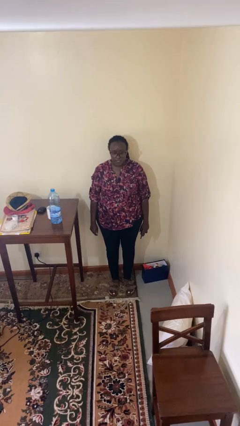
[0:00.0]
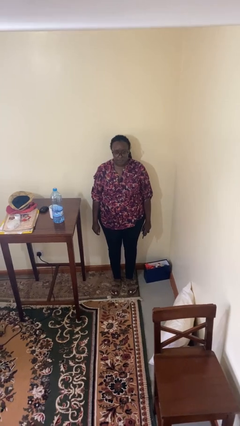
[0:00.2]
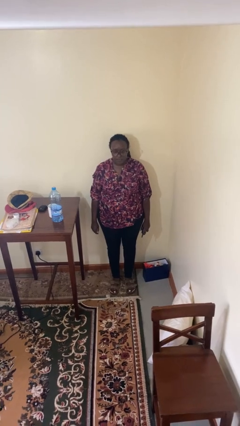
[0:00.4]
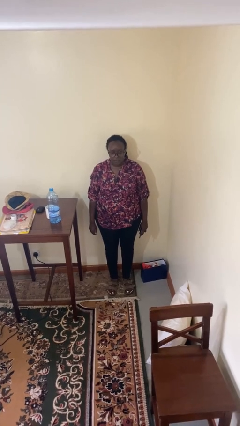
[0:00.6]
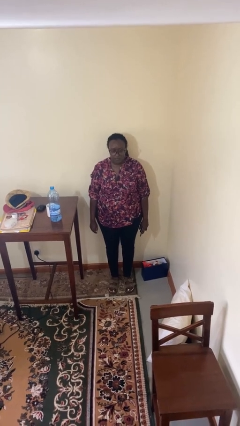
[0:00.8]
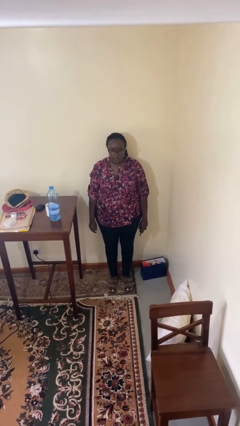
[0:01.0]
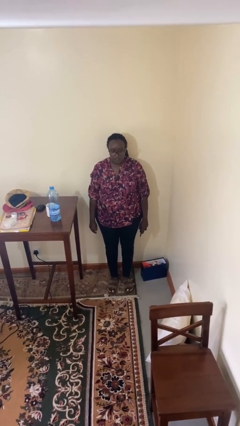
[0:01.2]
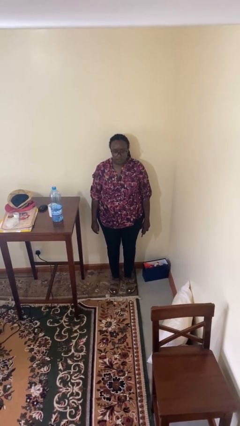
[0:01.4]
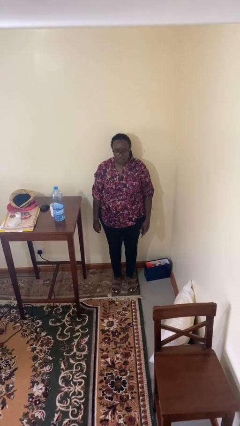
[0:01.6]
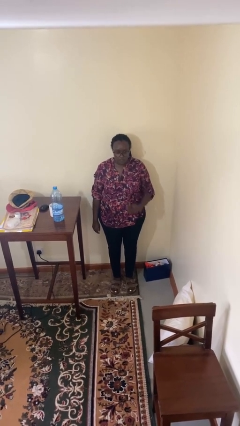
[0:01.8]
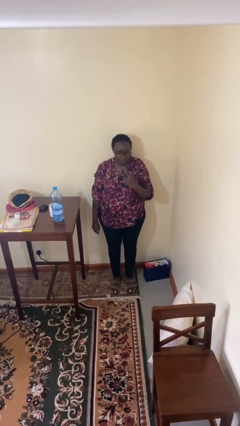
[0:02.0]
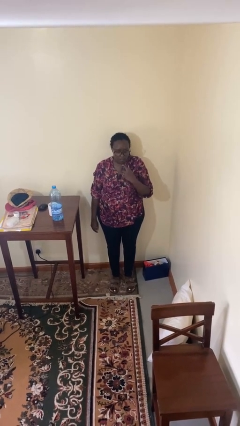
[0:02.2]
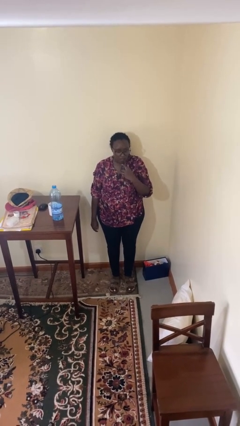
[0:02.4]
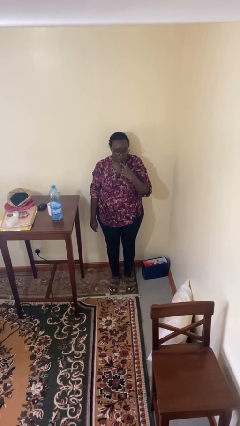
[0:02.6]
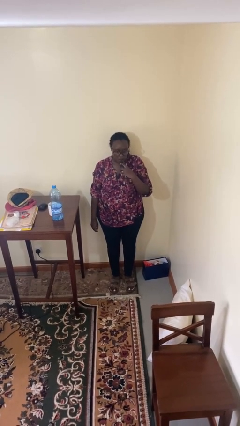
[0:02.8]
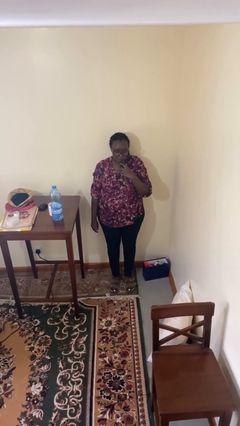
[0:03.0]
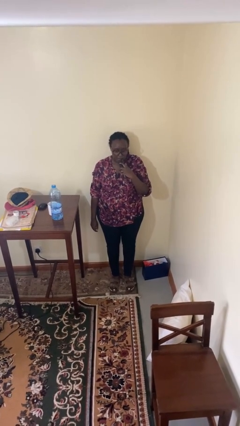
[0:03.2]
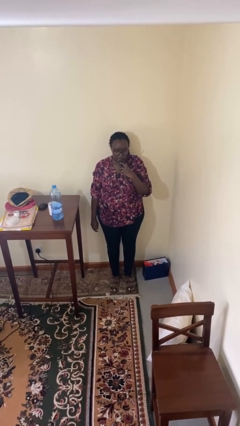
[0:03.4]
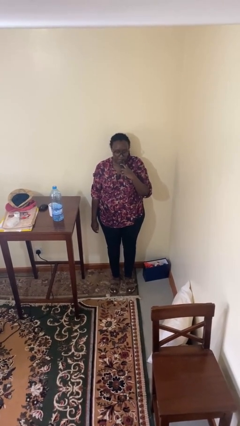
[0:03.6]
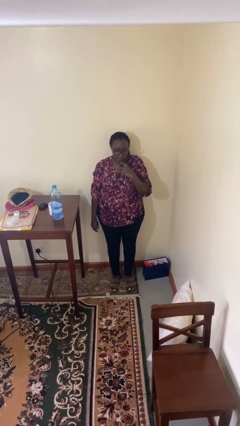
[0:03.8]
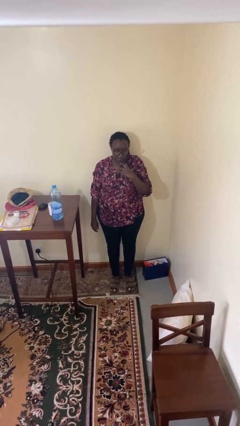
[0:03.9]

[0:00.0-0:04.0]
person vapes

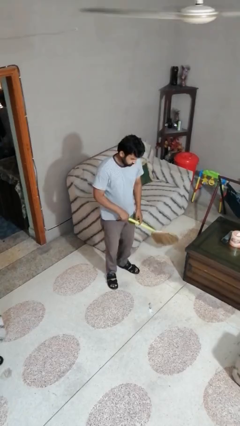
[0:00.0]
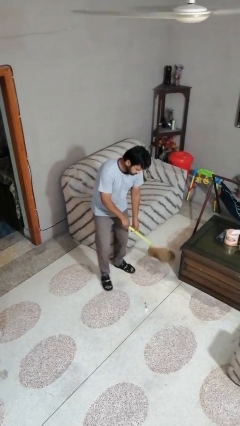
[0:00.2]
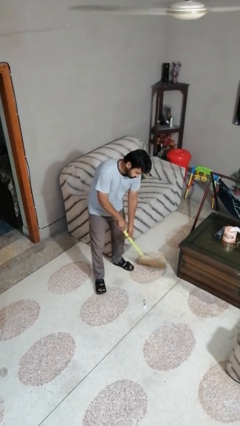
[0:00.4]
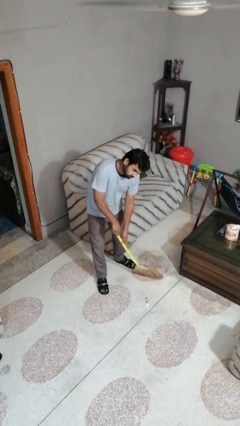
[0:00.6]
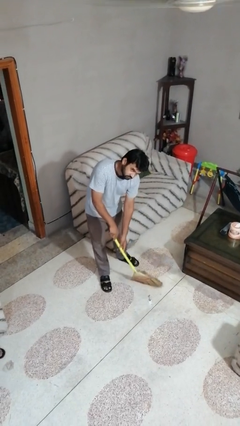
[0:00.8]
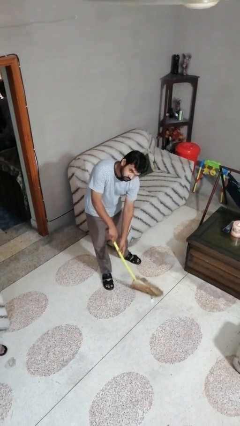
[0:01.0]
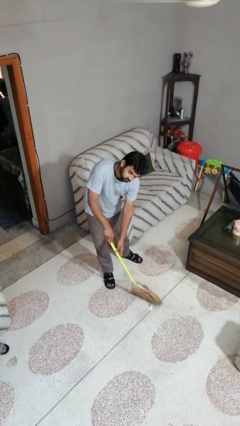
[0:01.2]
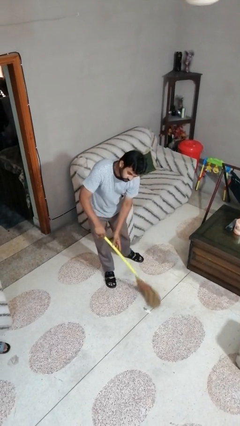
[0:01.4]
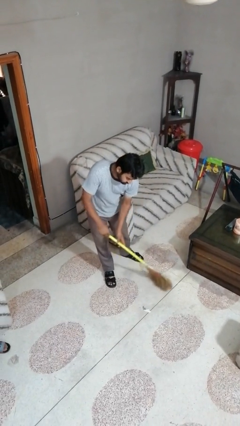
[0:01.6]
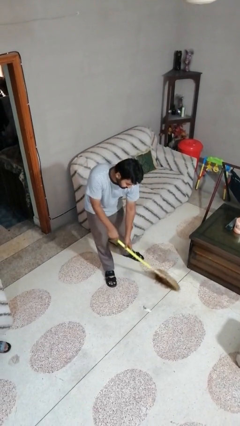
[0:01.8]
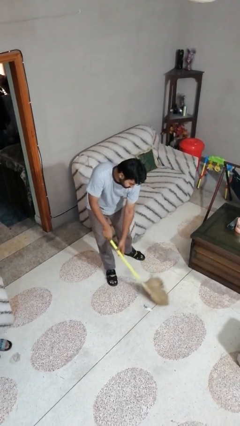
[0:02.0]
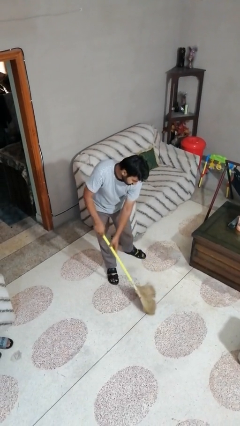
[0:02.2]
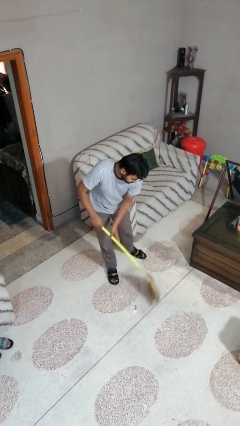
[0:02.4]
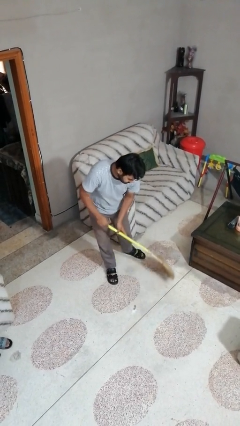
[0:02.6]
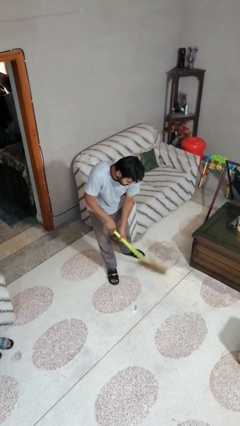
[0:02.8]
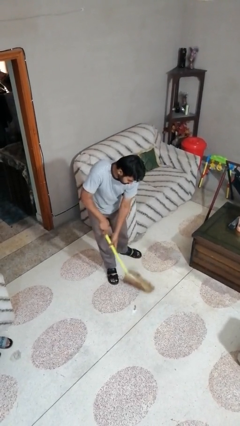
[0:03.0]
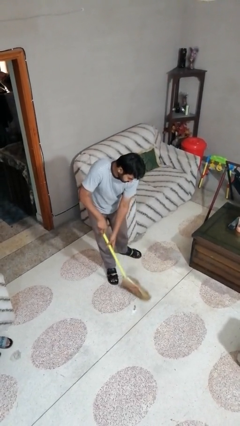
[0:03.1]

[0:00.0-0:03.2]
person sweeps floor

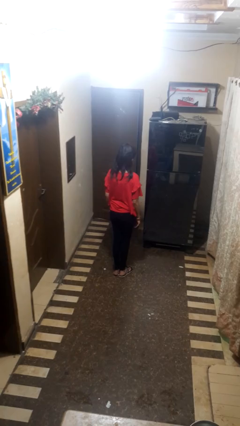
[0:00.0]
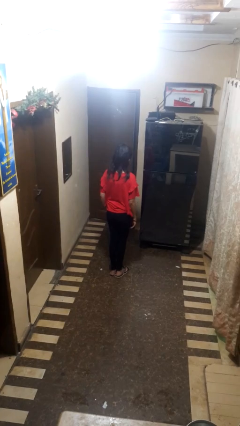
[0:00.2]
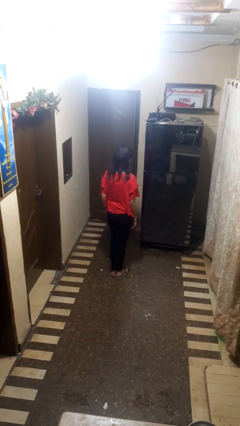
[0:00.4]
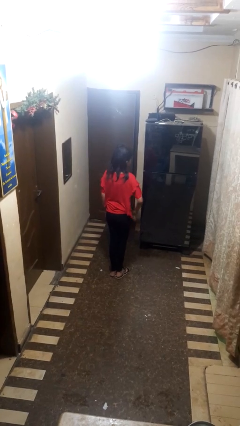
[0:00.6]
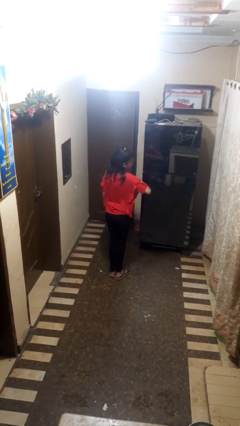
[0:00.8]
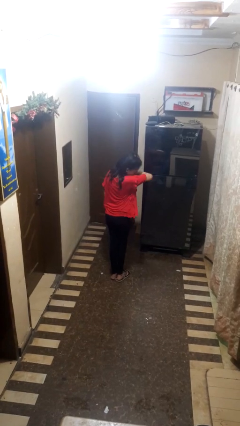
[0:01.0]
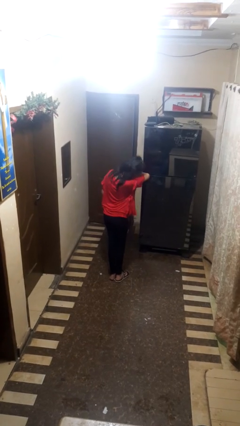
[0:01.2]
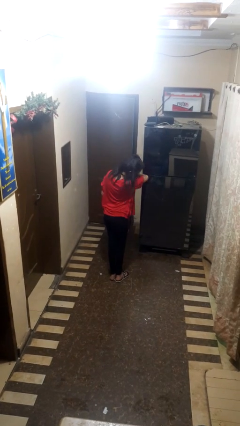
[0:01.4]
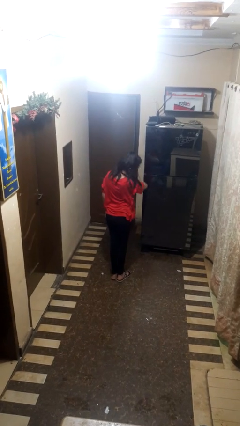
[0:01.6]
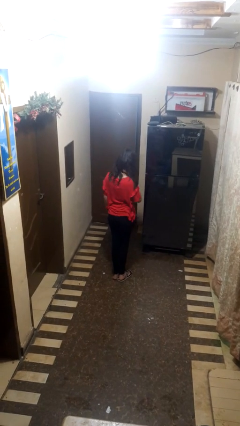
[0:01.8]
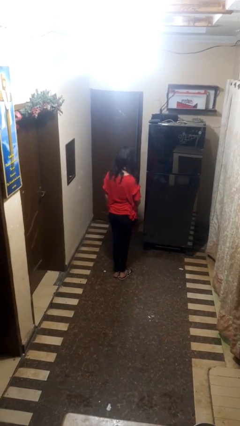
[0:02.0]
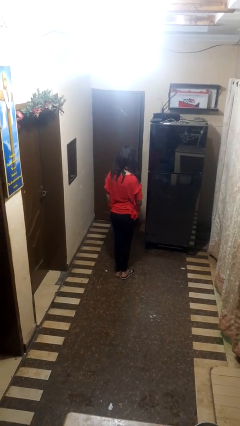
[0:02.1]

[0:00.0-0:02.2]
person sneezes into arm

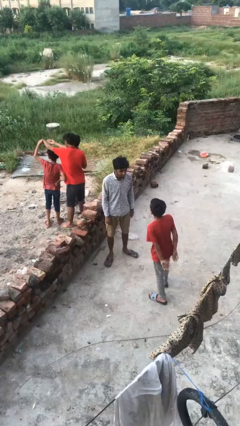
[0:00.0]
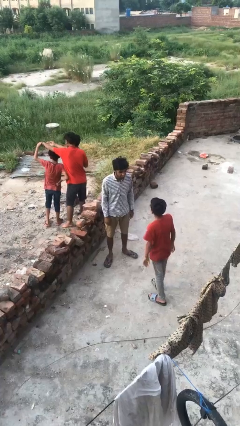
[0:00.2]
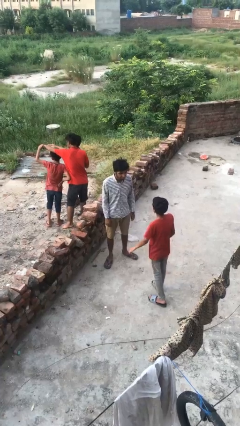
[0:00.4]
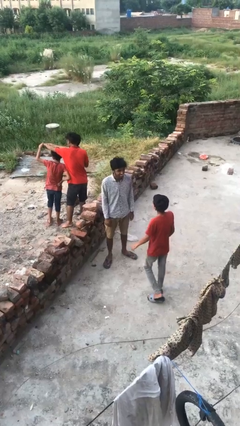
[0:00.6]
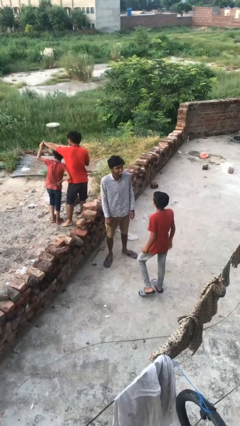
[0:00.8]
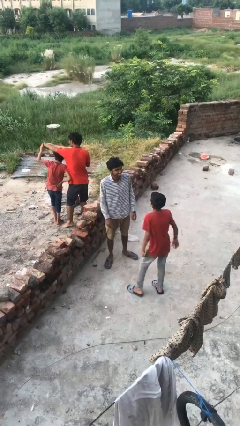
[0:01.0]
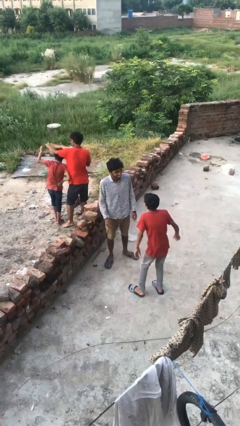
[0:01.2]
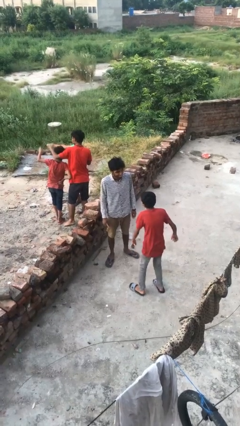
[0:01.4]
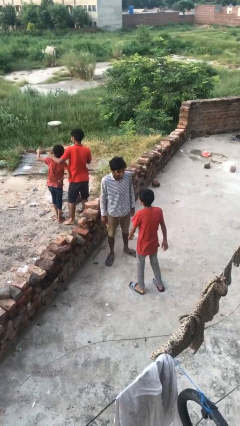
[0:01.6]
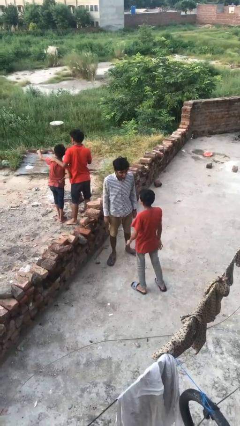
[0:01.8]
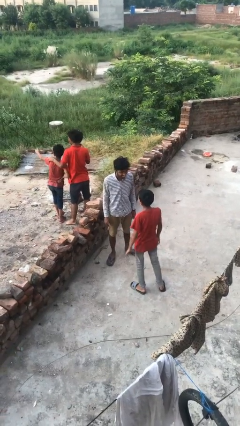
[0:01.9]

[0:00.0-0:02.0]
person laughs with person

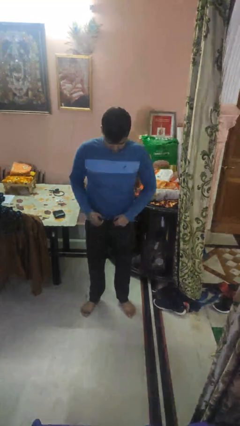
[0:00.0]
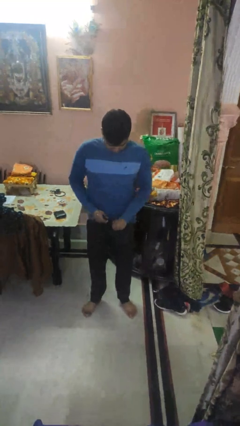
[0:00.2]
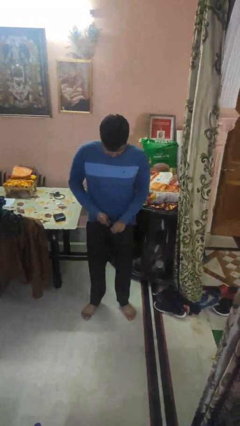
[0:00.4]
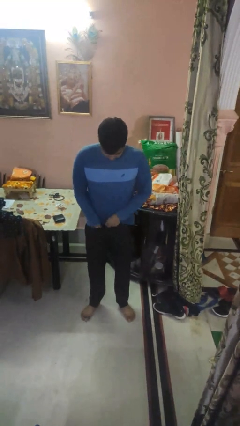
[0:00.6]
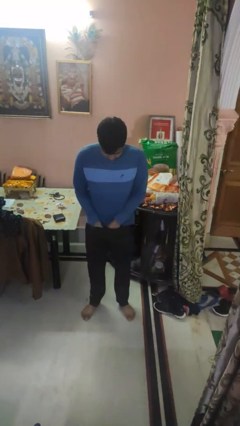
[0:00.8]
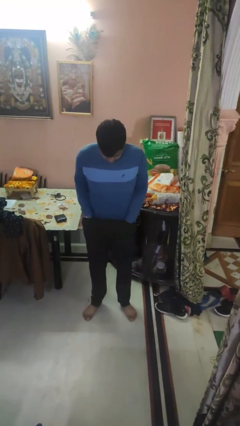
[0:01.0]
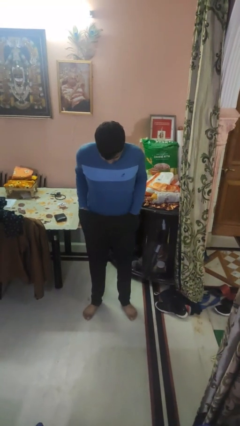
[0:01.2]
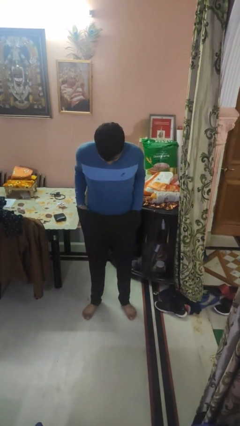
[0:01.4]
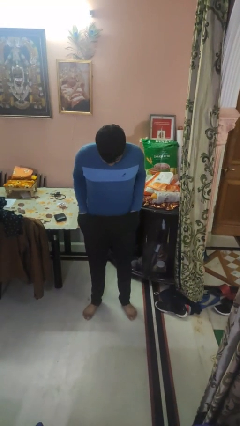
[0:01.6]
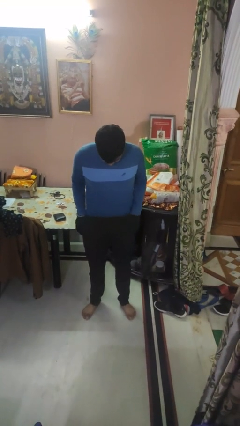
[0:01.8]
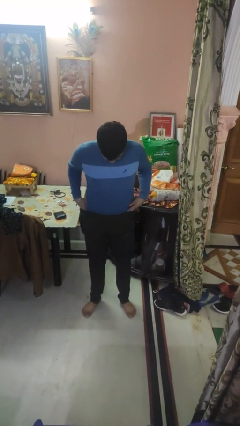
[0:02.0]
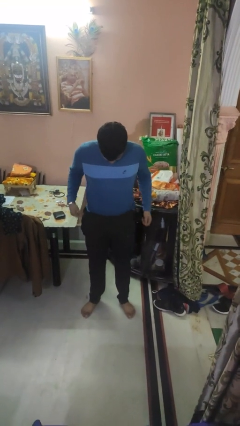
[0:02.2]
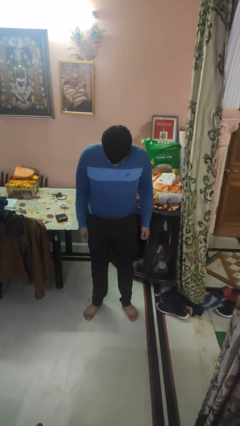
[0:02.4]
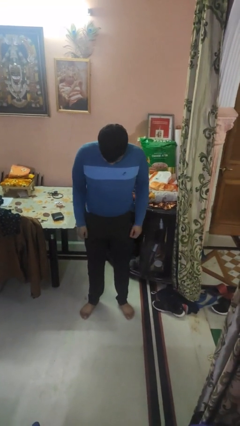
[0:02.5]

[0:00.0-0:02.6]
person tucks in shirt

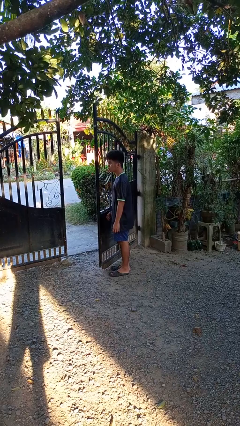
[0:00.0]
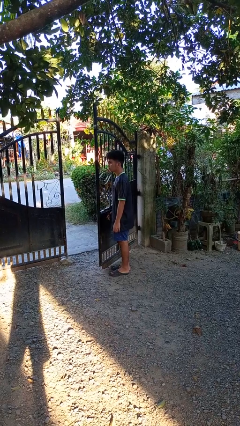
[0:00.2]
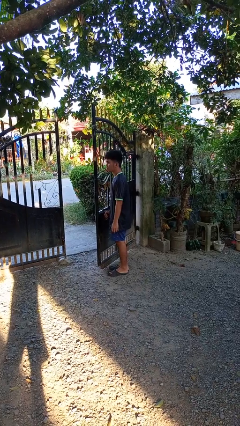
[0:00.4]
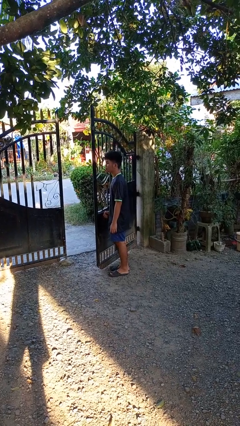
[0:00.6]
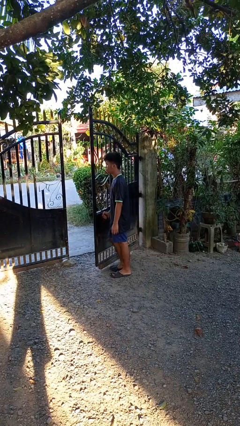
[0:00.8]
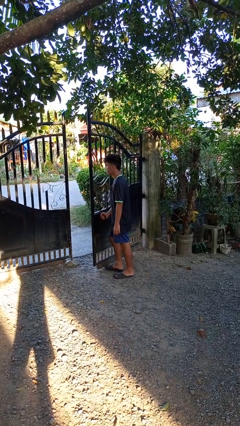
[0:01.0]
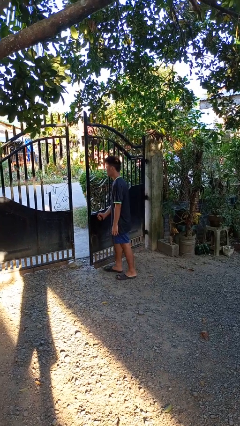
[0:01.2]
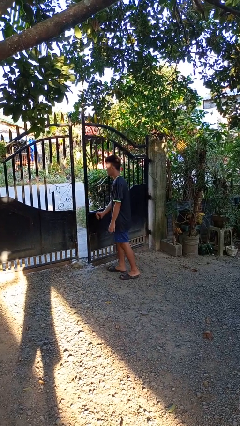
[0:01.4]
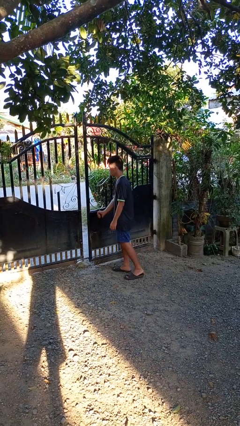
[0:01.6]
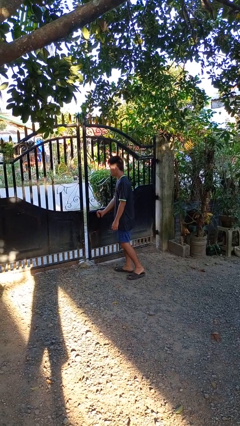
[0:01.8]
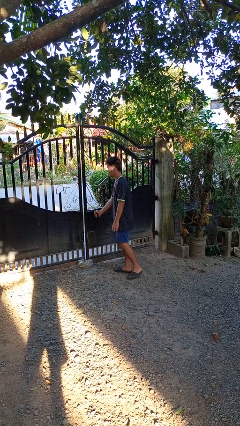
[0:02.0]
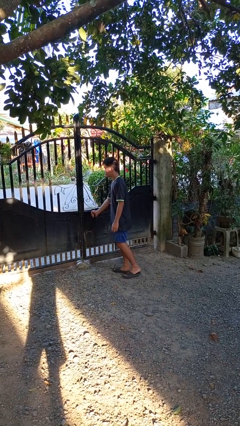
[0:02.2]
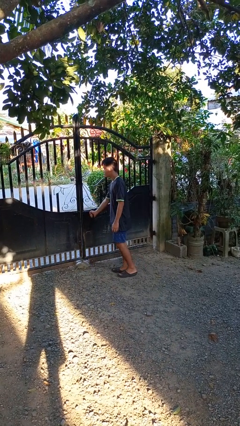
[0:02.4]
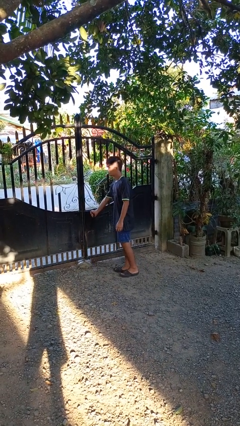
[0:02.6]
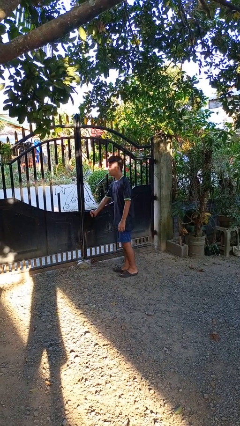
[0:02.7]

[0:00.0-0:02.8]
person closes gate

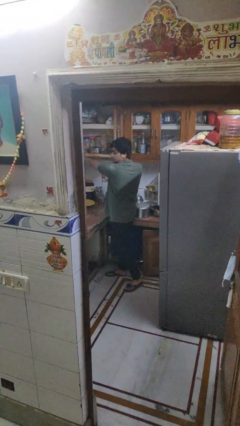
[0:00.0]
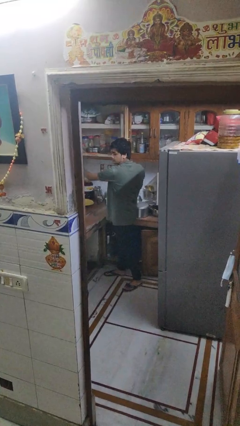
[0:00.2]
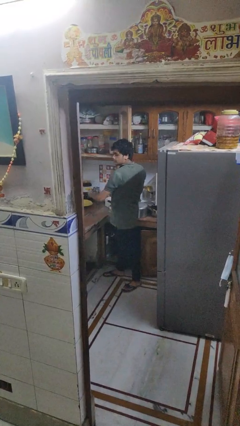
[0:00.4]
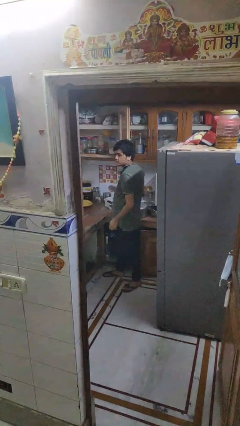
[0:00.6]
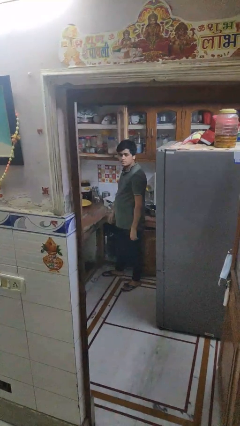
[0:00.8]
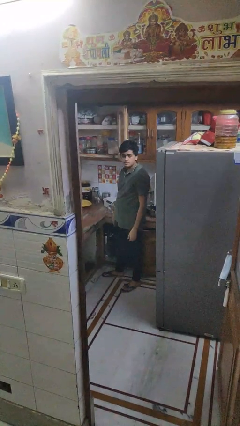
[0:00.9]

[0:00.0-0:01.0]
person opens cabinet
